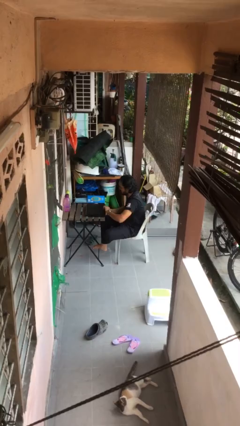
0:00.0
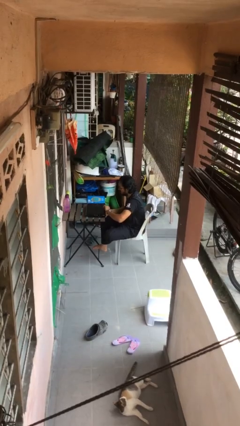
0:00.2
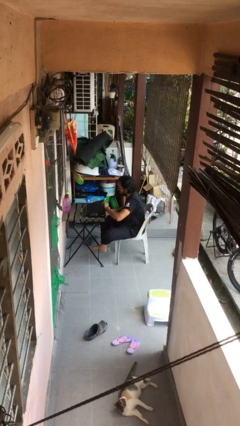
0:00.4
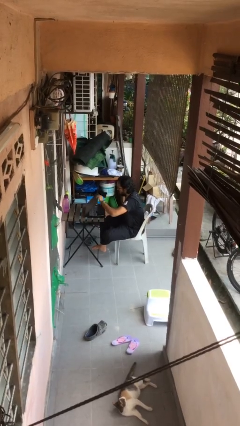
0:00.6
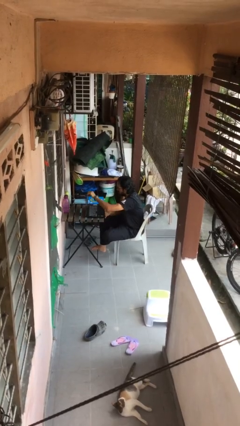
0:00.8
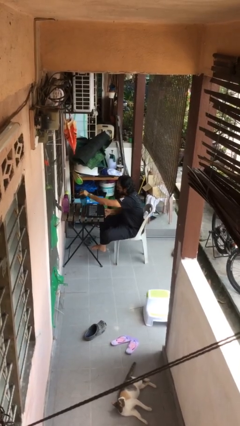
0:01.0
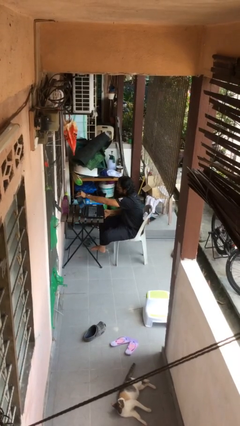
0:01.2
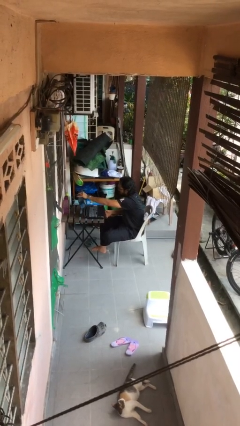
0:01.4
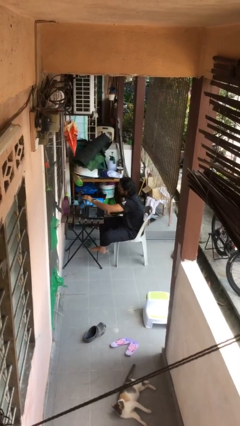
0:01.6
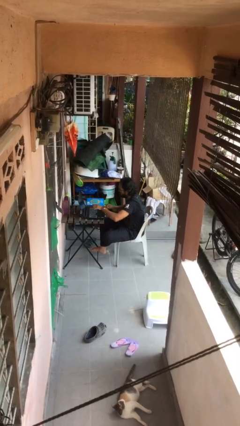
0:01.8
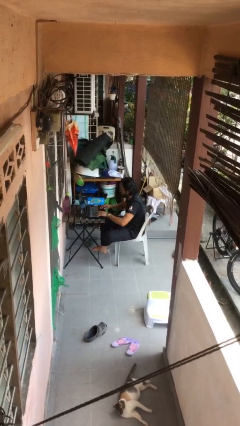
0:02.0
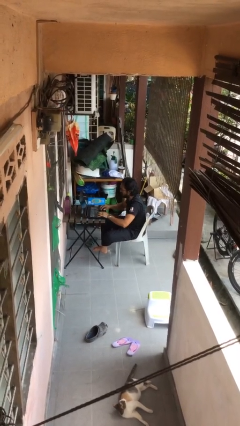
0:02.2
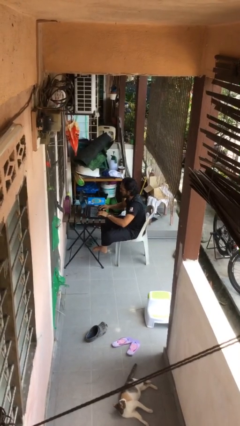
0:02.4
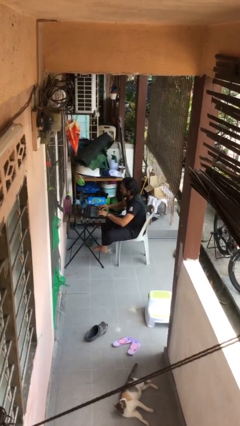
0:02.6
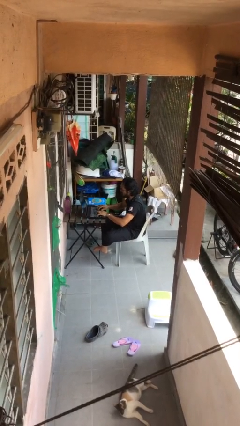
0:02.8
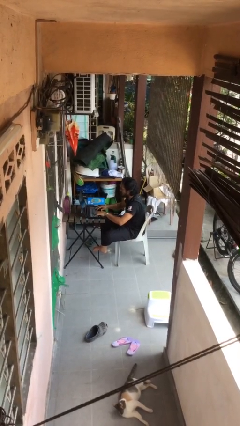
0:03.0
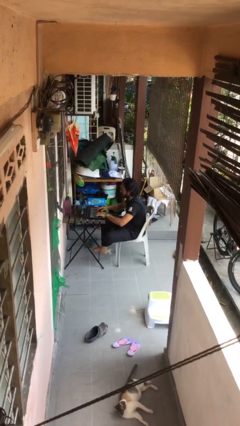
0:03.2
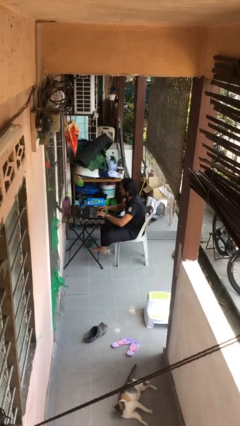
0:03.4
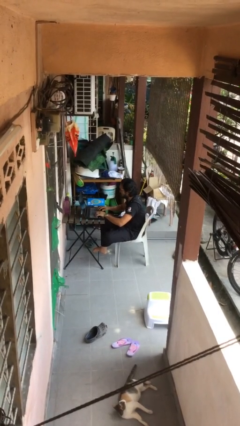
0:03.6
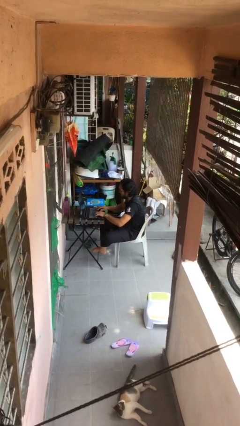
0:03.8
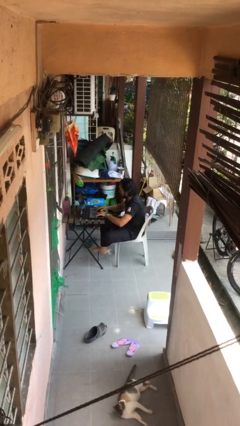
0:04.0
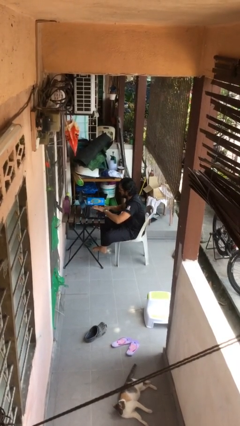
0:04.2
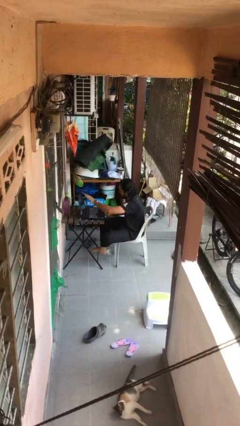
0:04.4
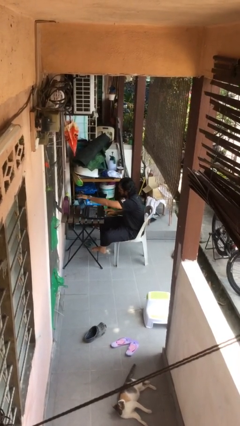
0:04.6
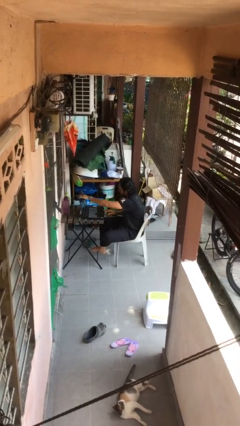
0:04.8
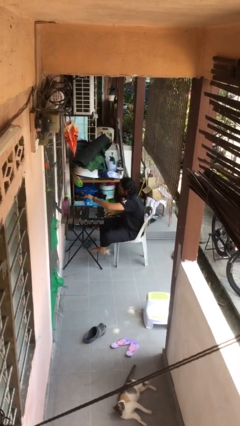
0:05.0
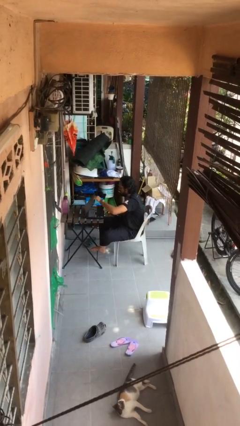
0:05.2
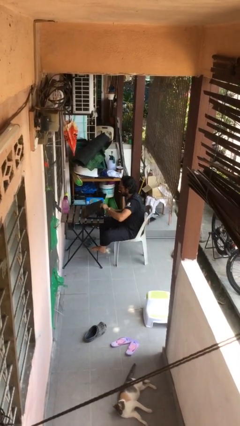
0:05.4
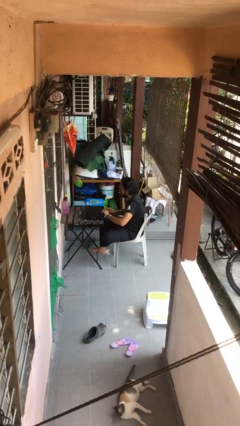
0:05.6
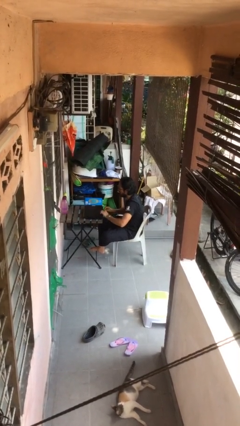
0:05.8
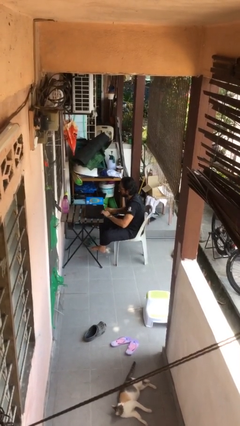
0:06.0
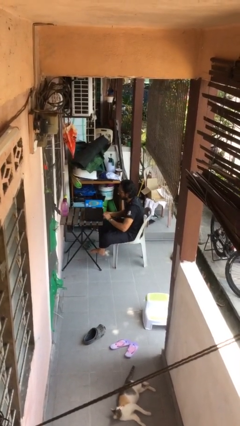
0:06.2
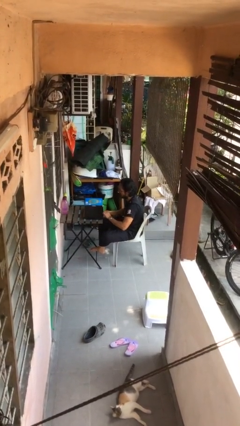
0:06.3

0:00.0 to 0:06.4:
person interacts with laptop

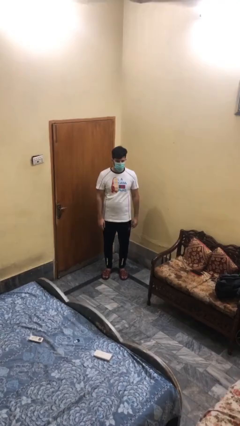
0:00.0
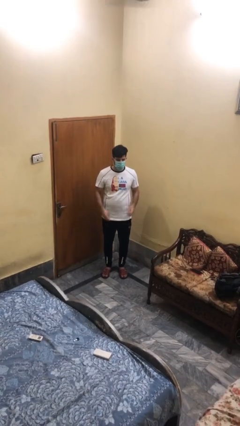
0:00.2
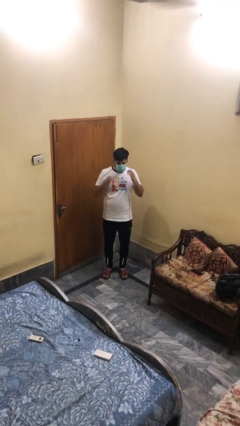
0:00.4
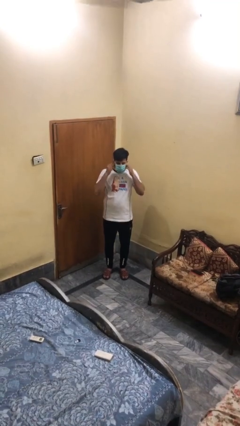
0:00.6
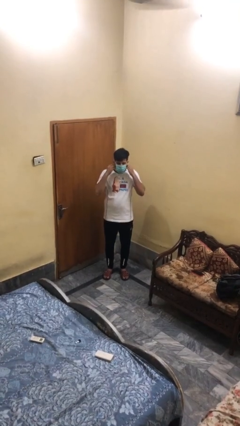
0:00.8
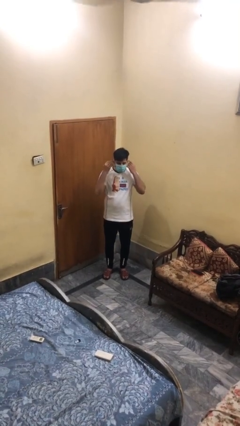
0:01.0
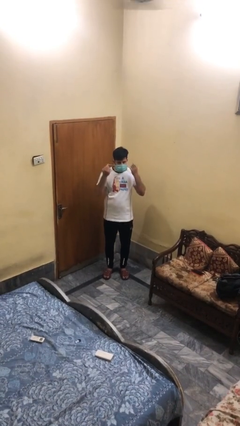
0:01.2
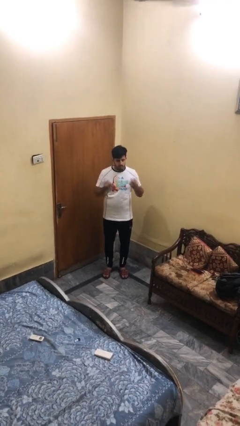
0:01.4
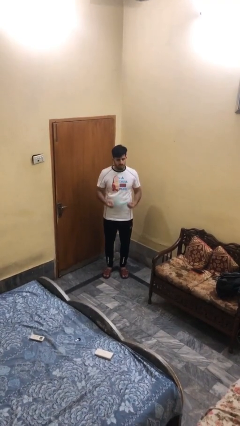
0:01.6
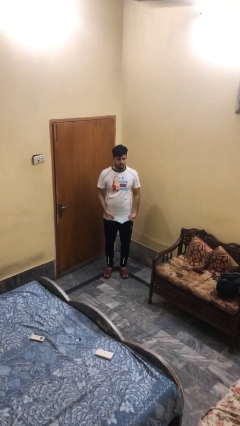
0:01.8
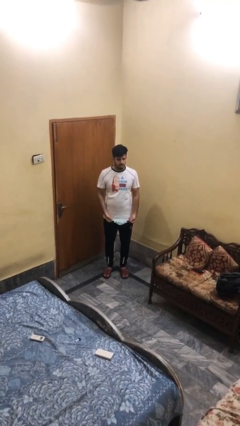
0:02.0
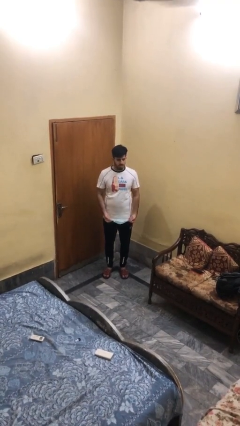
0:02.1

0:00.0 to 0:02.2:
person takes off facemask

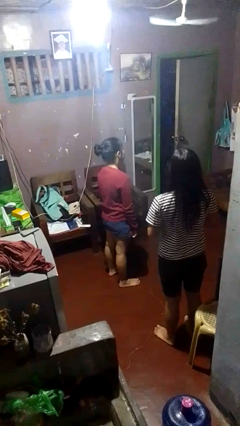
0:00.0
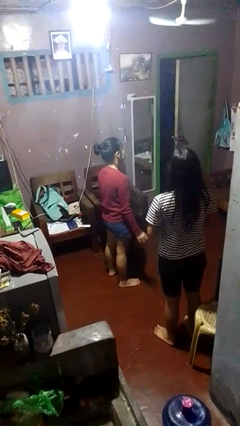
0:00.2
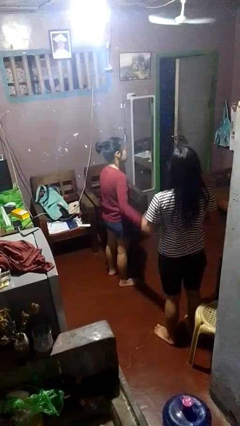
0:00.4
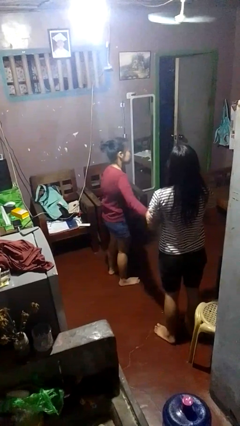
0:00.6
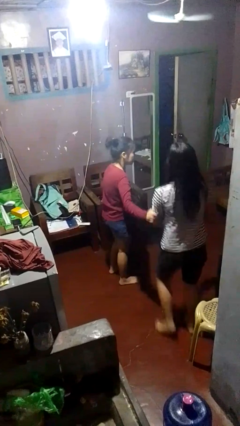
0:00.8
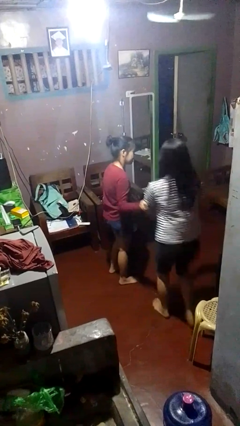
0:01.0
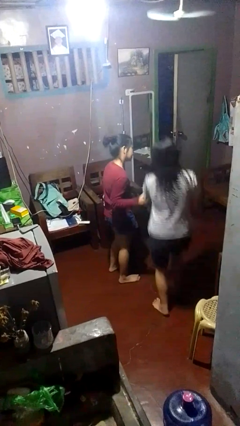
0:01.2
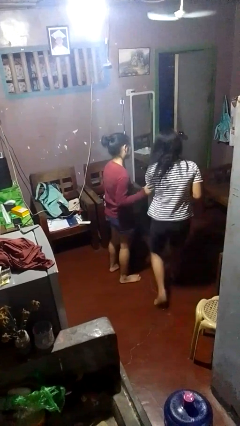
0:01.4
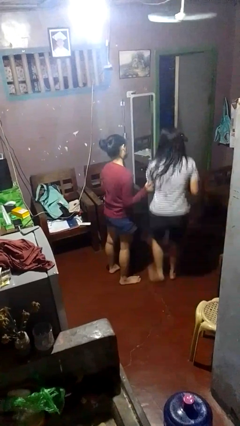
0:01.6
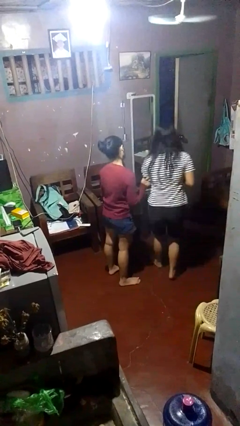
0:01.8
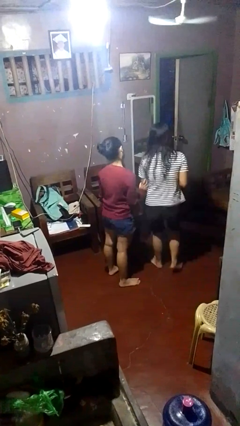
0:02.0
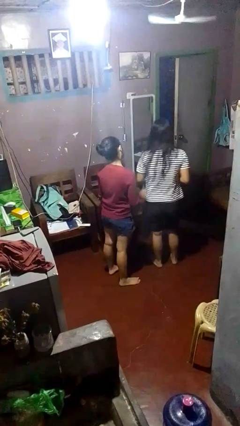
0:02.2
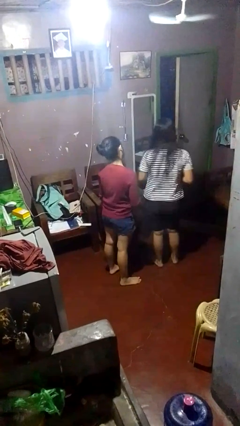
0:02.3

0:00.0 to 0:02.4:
person grabs person by bicep

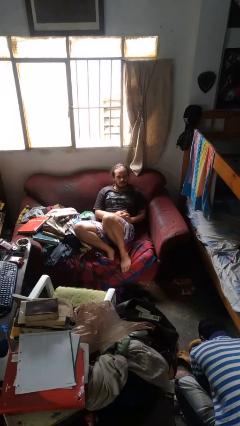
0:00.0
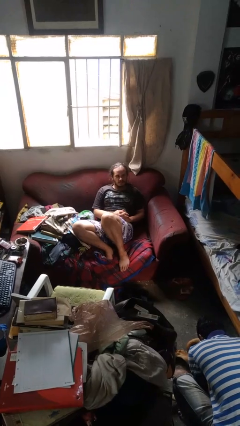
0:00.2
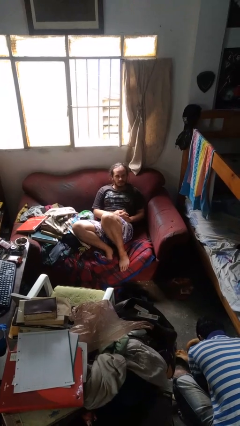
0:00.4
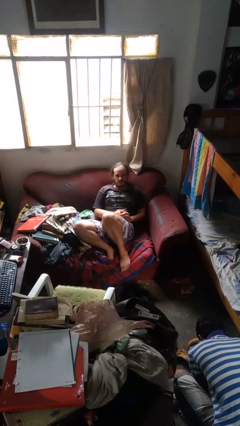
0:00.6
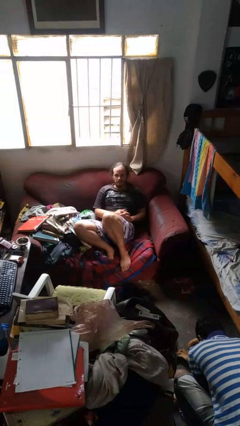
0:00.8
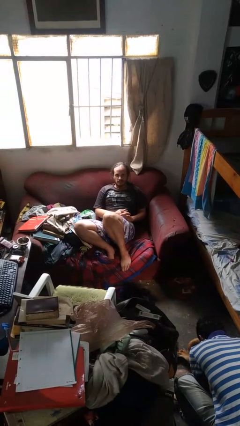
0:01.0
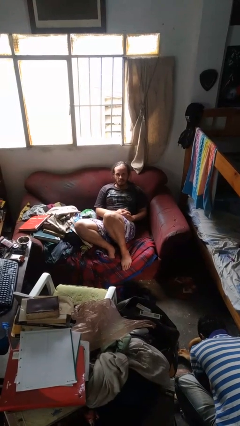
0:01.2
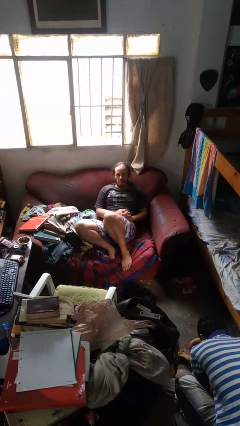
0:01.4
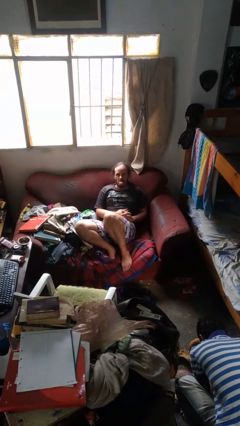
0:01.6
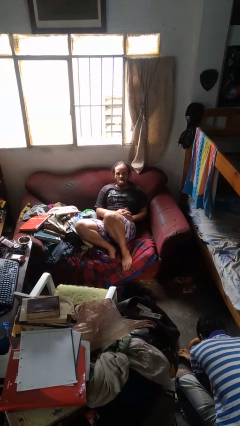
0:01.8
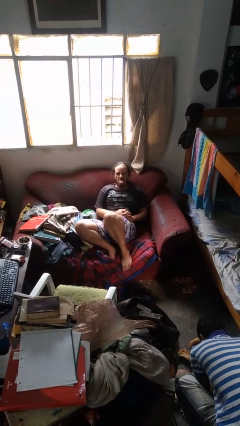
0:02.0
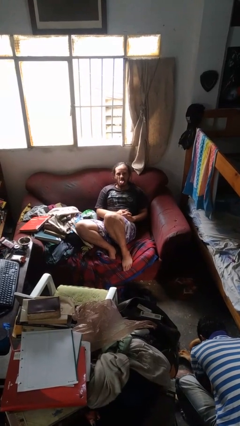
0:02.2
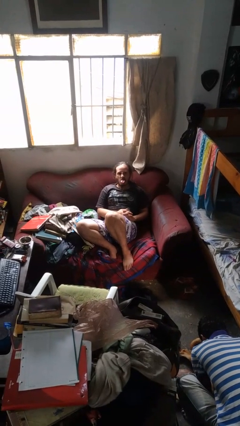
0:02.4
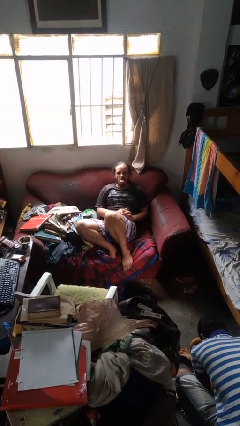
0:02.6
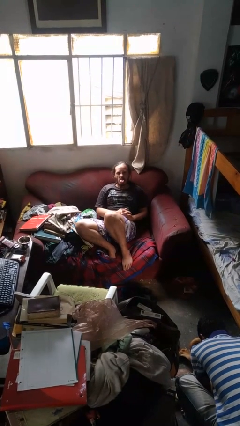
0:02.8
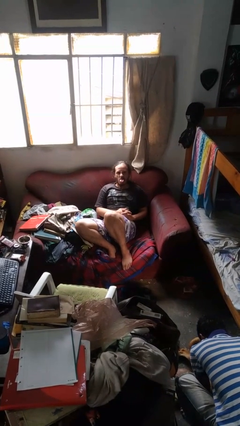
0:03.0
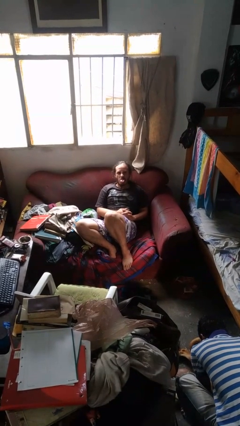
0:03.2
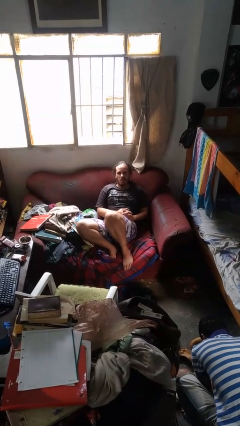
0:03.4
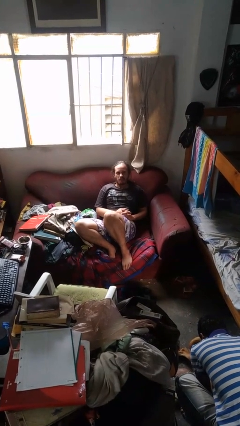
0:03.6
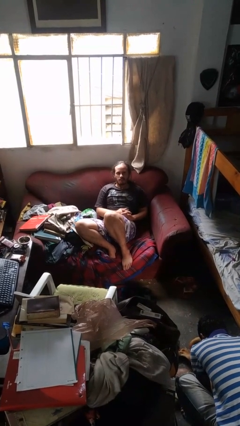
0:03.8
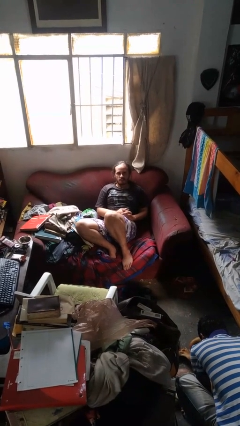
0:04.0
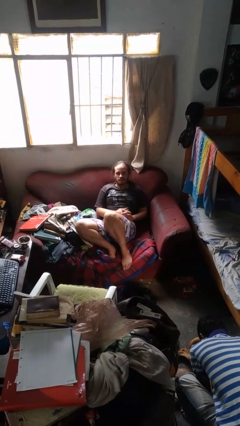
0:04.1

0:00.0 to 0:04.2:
person sticks out tongue

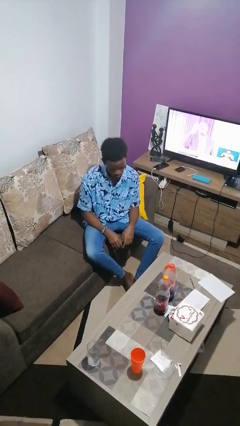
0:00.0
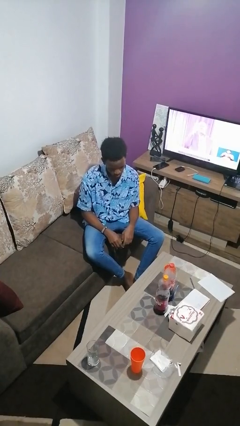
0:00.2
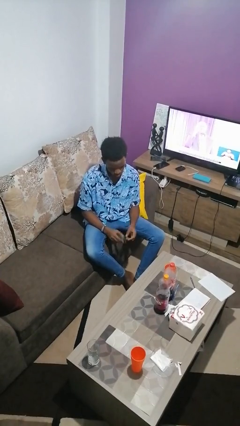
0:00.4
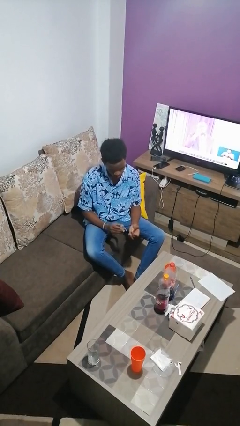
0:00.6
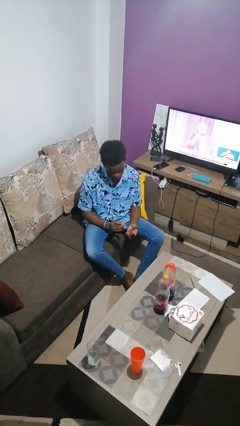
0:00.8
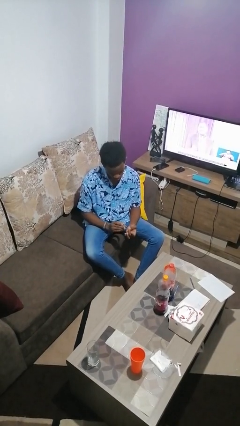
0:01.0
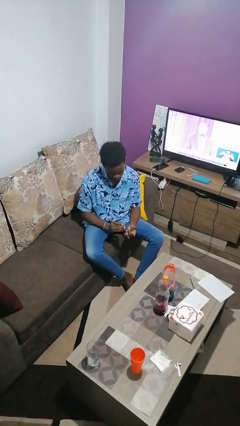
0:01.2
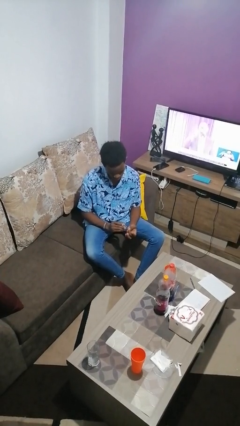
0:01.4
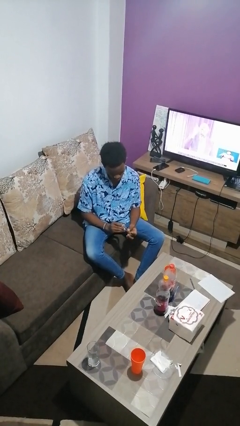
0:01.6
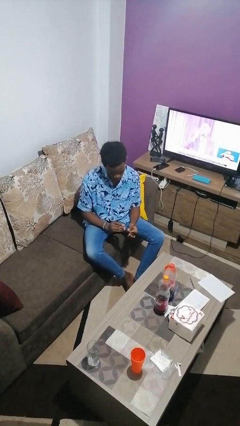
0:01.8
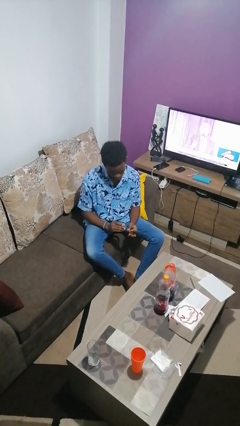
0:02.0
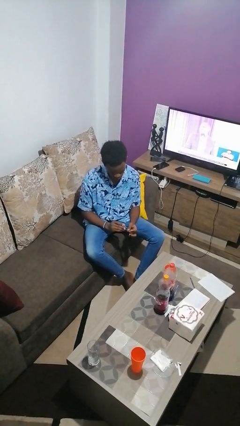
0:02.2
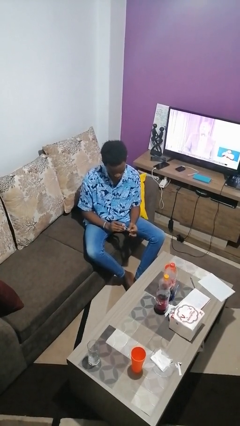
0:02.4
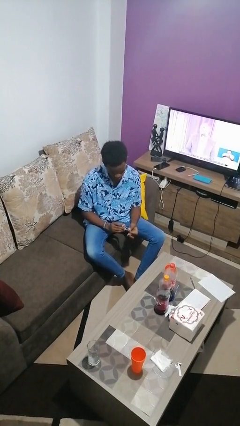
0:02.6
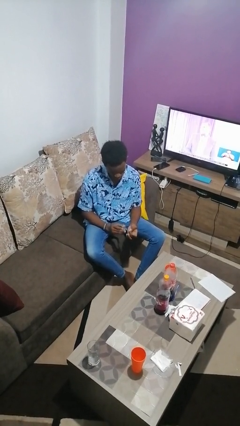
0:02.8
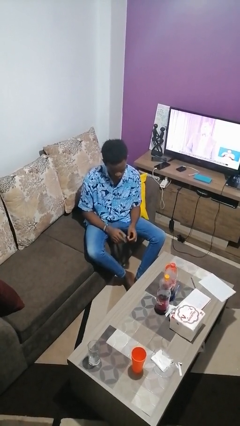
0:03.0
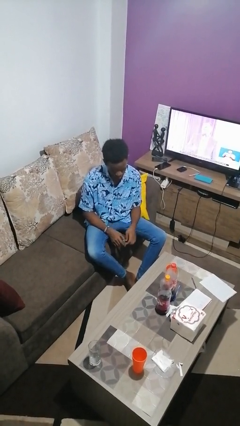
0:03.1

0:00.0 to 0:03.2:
person clips fingernails
